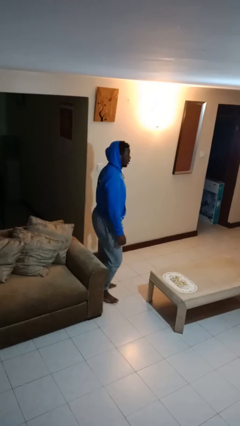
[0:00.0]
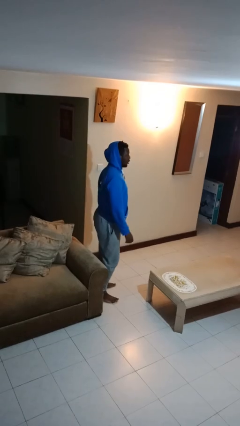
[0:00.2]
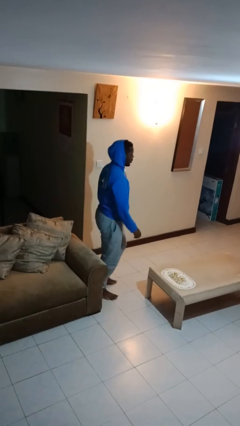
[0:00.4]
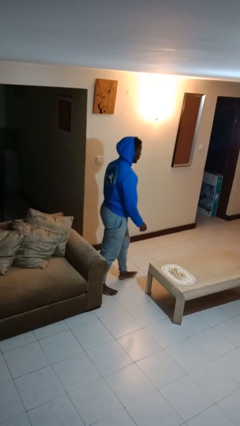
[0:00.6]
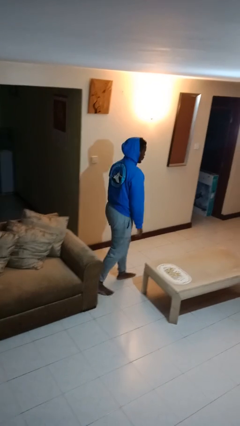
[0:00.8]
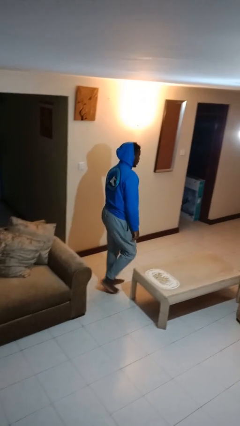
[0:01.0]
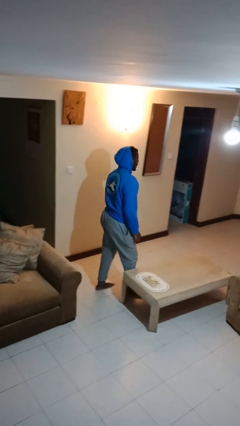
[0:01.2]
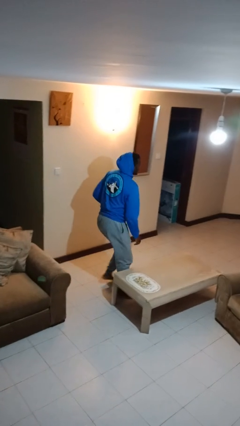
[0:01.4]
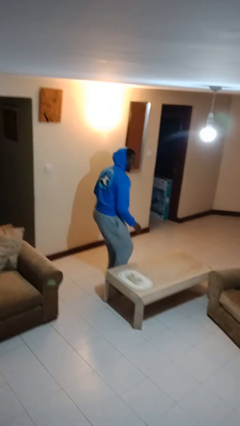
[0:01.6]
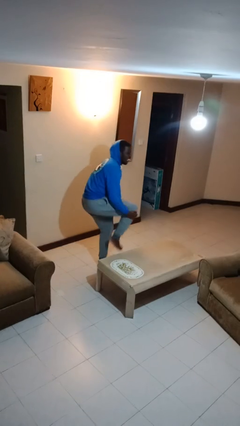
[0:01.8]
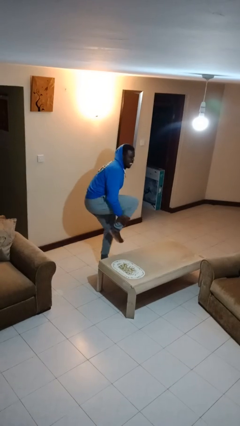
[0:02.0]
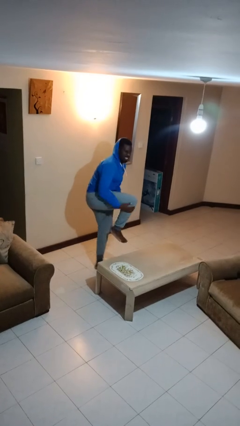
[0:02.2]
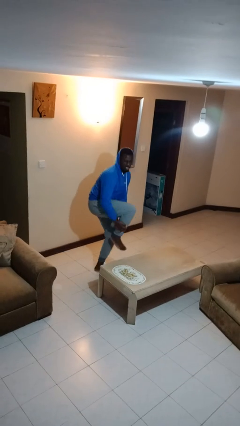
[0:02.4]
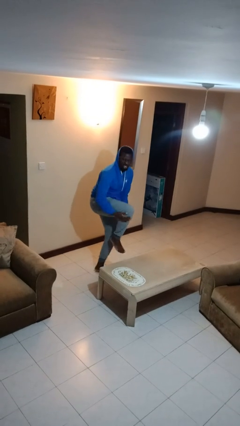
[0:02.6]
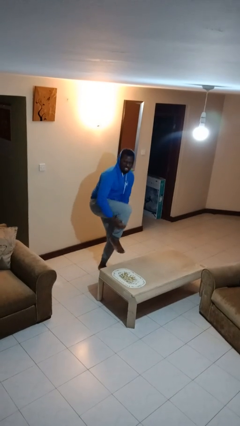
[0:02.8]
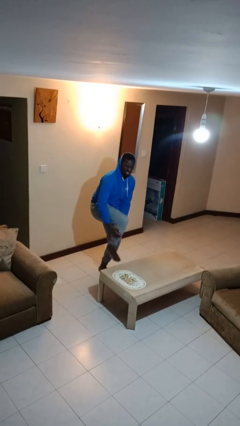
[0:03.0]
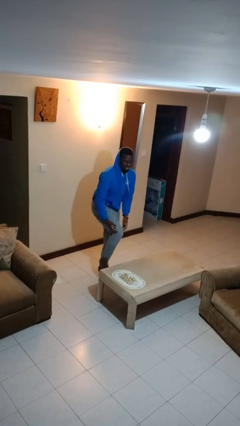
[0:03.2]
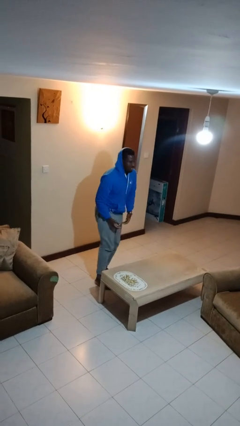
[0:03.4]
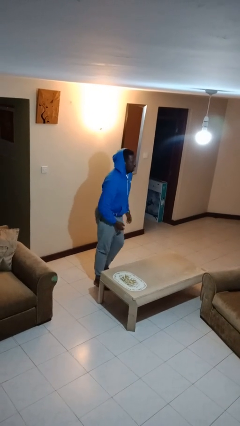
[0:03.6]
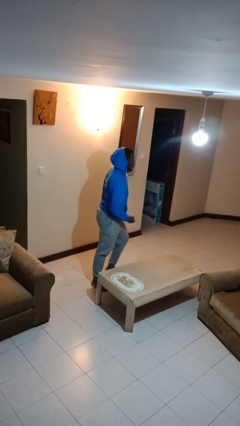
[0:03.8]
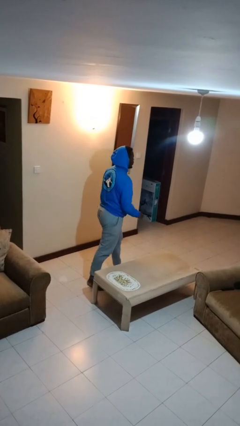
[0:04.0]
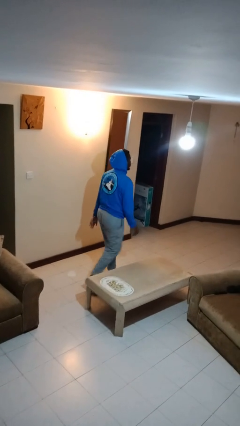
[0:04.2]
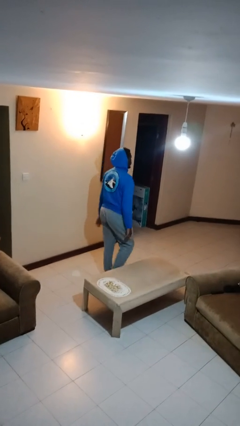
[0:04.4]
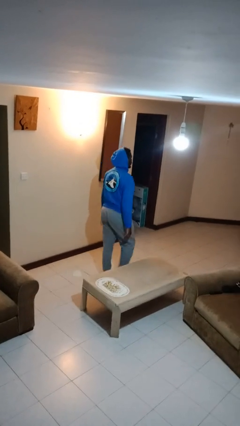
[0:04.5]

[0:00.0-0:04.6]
person bumps into table

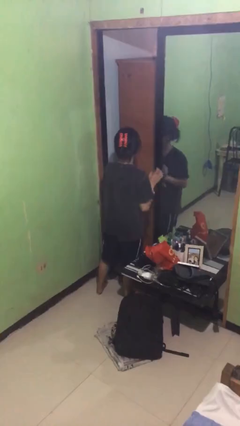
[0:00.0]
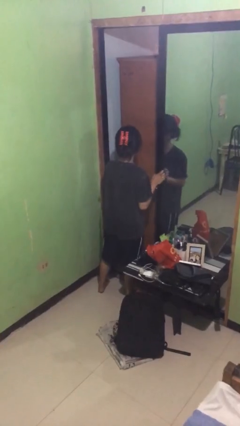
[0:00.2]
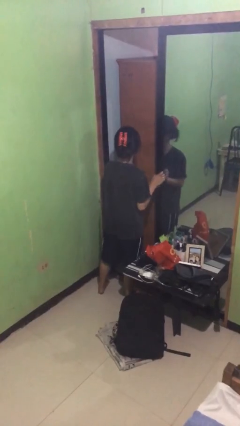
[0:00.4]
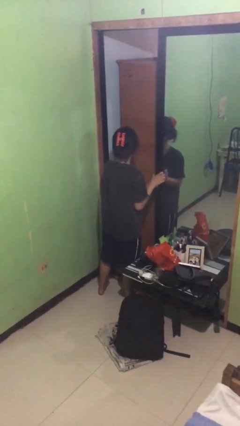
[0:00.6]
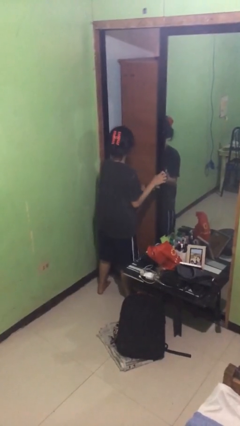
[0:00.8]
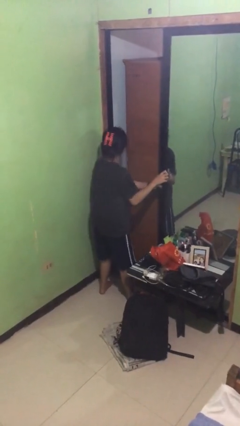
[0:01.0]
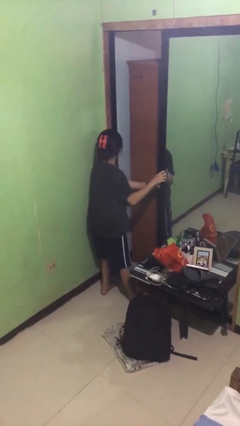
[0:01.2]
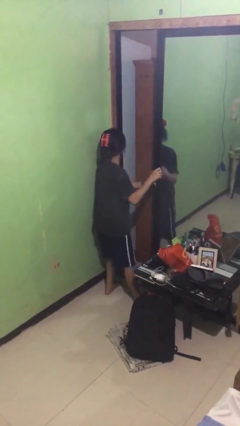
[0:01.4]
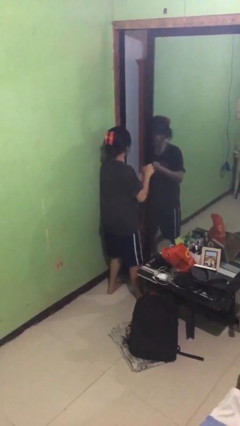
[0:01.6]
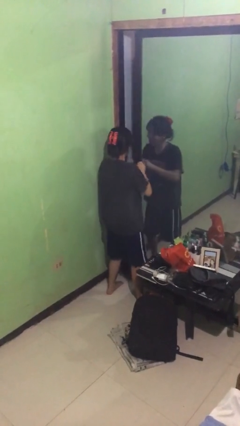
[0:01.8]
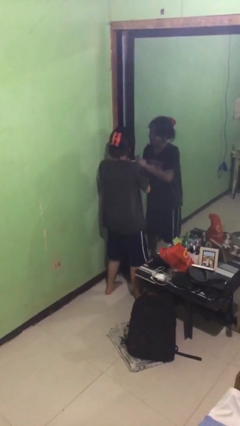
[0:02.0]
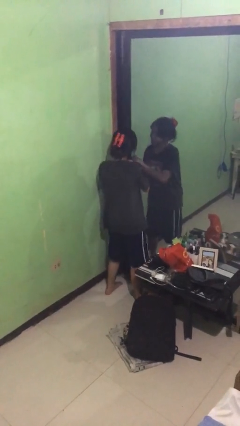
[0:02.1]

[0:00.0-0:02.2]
person closes sliding door

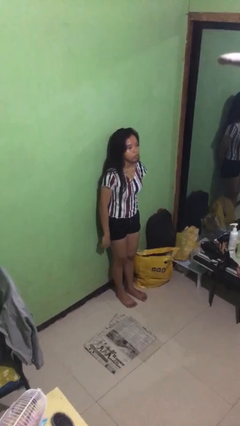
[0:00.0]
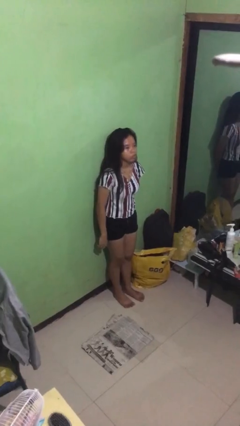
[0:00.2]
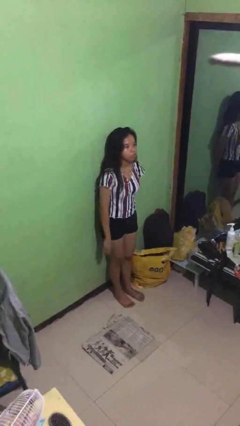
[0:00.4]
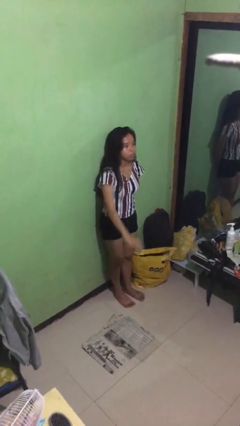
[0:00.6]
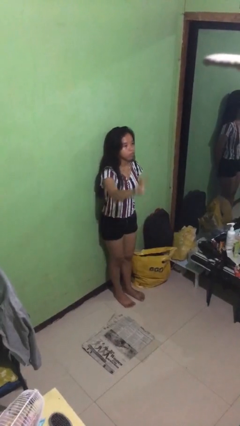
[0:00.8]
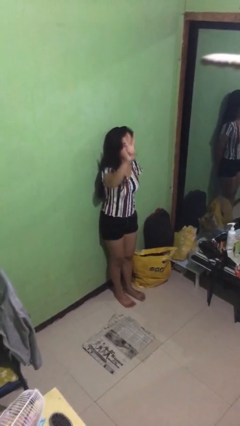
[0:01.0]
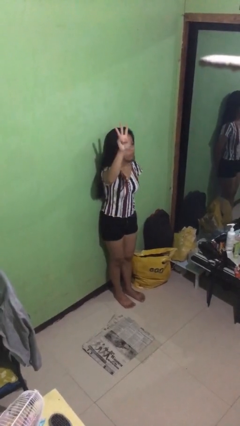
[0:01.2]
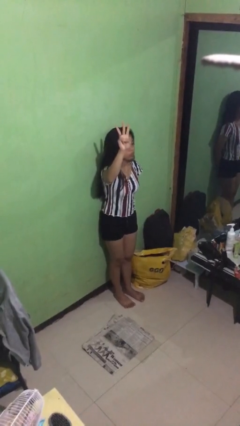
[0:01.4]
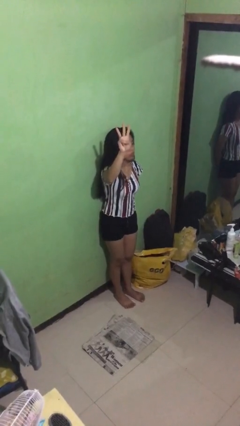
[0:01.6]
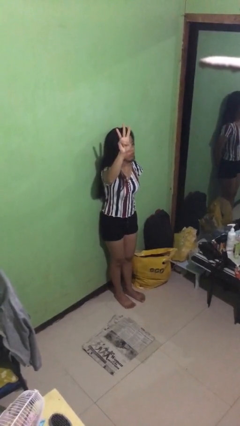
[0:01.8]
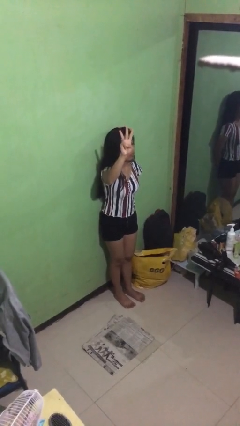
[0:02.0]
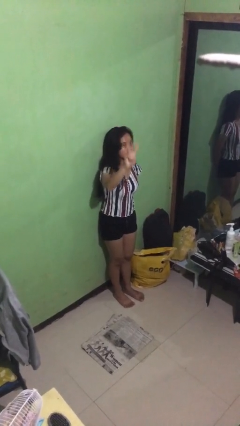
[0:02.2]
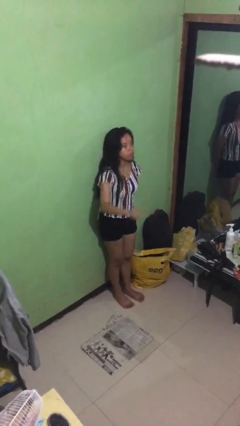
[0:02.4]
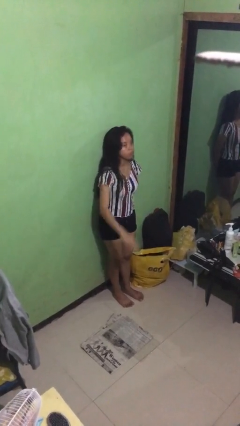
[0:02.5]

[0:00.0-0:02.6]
person gestures number three

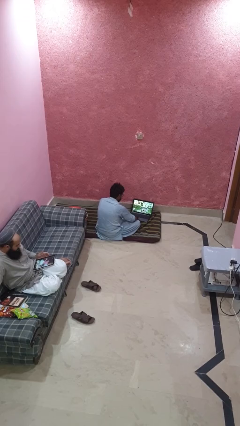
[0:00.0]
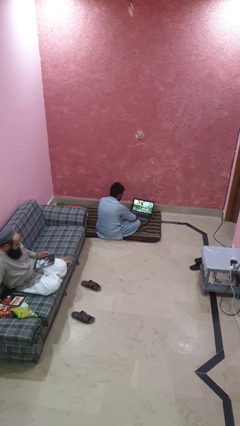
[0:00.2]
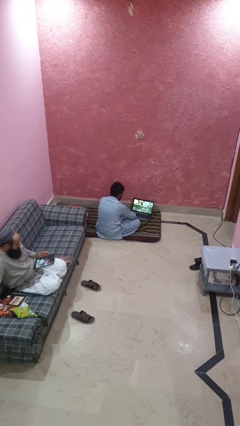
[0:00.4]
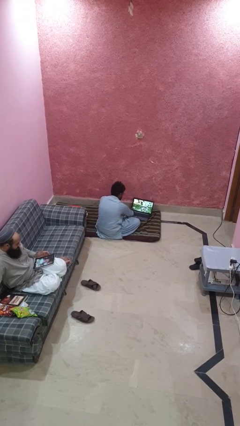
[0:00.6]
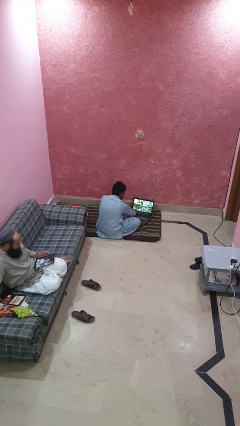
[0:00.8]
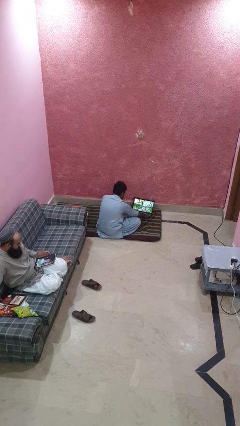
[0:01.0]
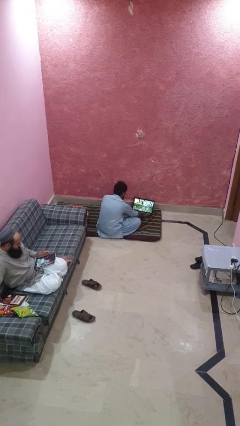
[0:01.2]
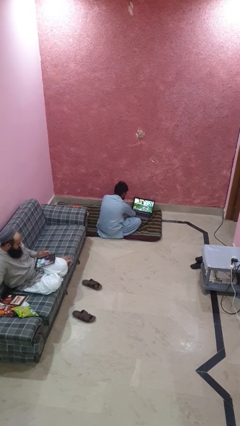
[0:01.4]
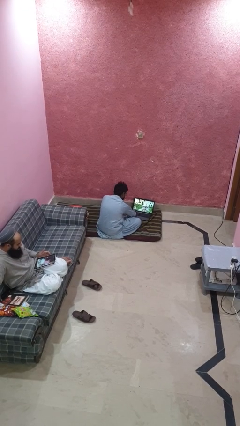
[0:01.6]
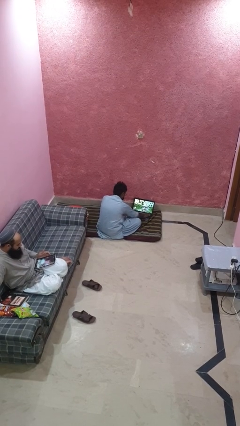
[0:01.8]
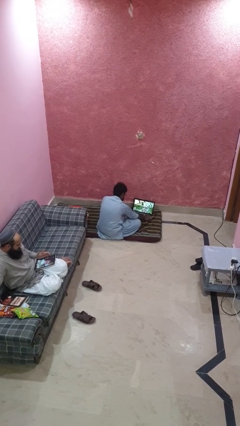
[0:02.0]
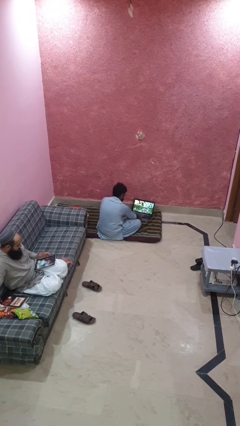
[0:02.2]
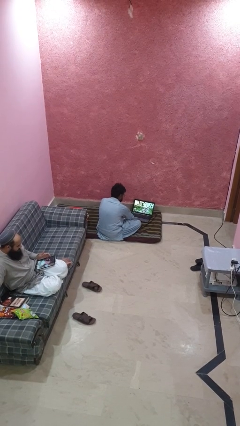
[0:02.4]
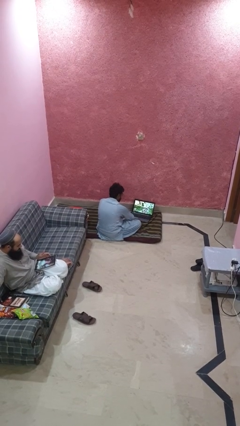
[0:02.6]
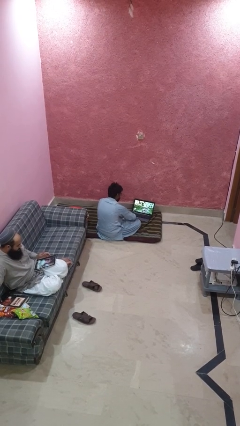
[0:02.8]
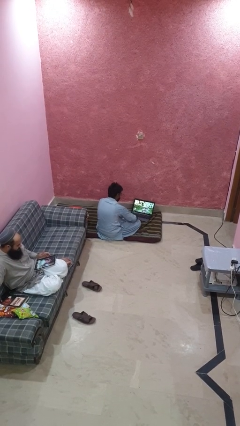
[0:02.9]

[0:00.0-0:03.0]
person waves hand over object

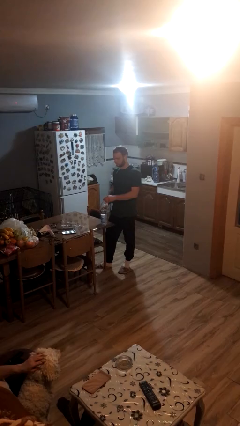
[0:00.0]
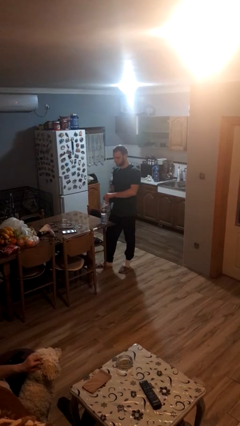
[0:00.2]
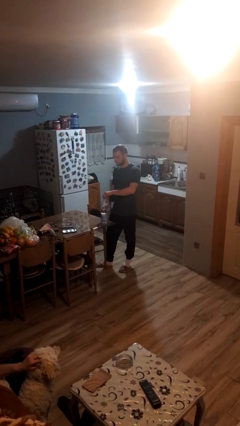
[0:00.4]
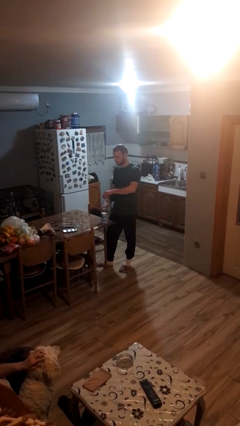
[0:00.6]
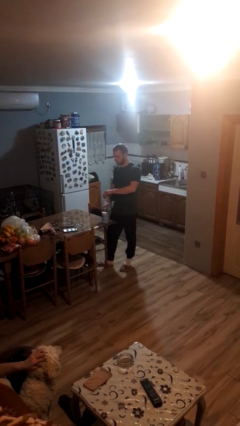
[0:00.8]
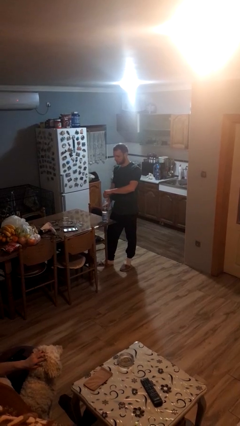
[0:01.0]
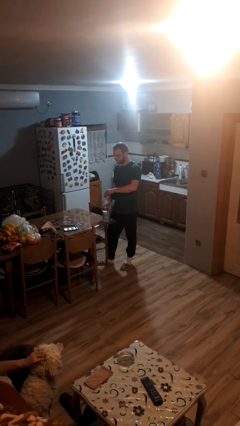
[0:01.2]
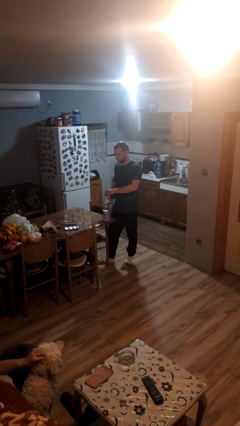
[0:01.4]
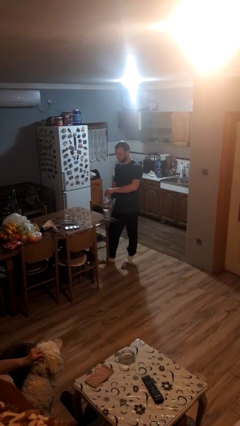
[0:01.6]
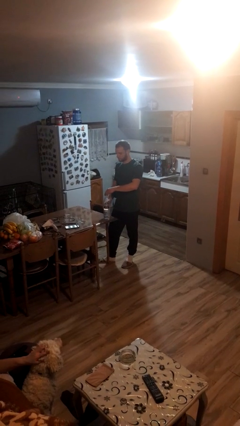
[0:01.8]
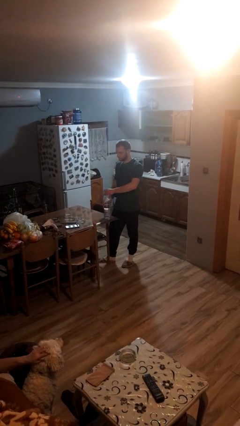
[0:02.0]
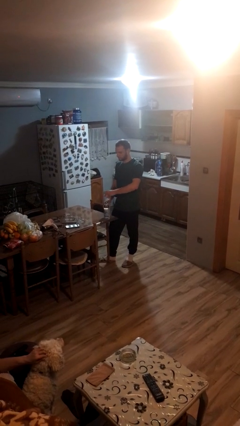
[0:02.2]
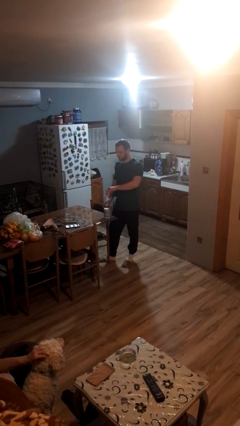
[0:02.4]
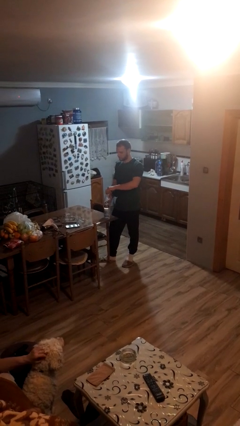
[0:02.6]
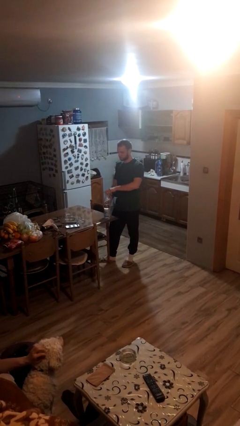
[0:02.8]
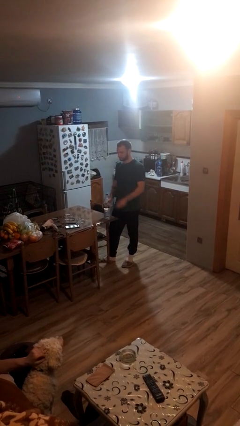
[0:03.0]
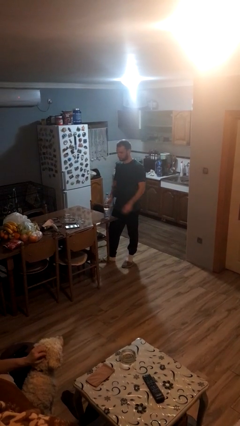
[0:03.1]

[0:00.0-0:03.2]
person screws lid to bottle

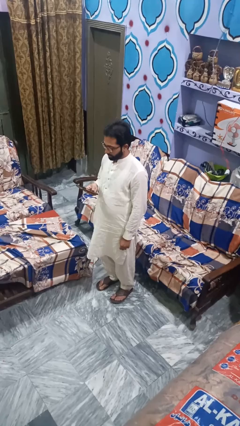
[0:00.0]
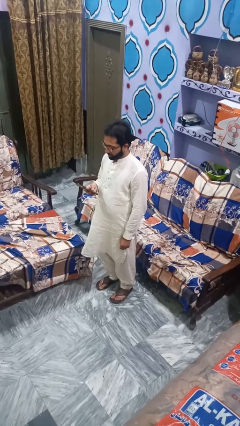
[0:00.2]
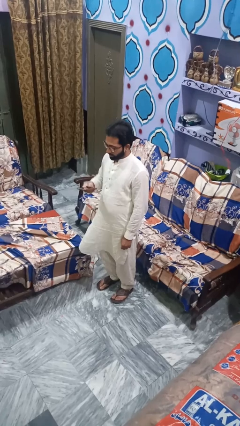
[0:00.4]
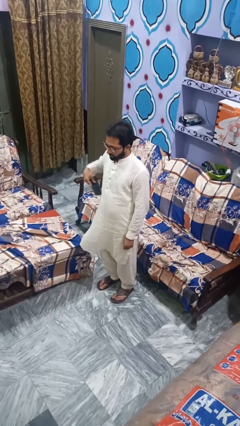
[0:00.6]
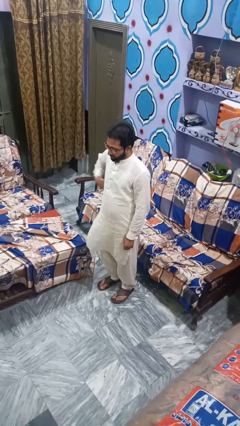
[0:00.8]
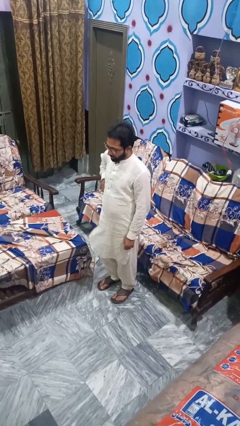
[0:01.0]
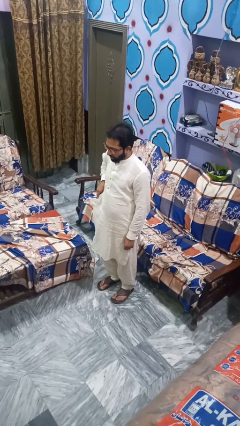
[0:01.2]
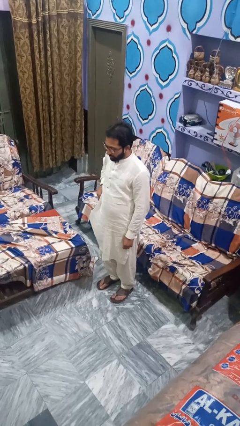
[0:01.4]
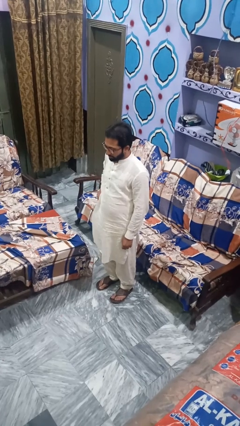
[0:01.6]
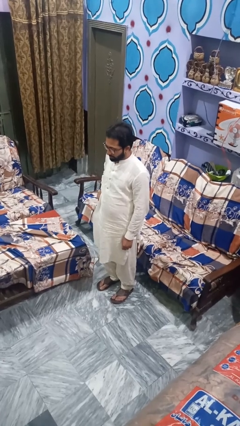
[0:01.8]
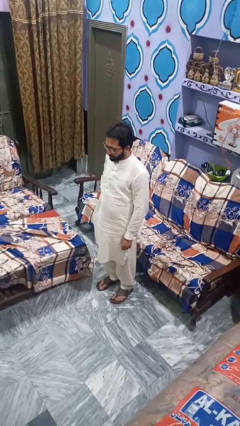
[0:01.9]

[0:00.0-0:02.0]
person puts phone into pocket

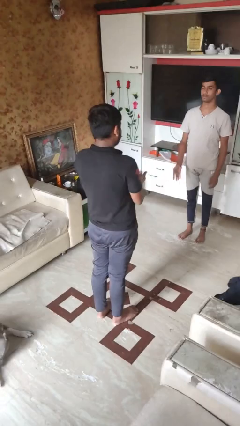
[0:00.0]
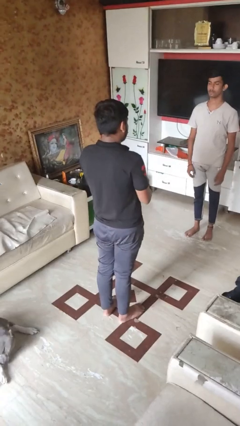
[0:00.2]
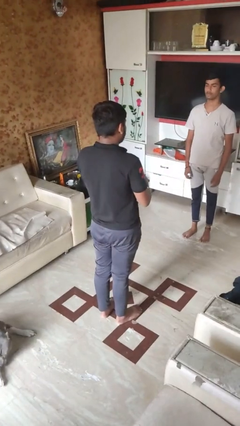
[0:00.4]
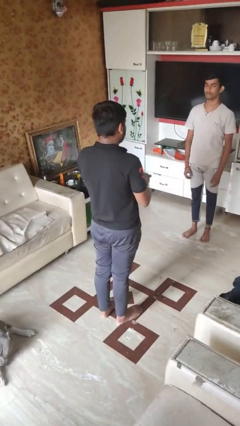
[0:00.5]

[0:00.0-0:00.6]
person catches object from person
